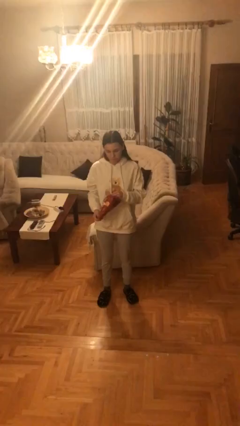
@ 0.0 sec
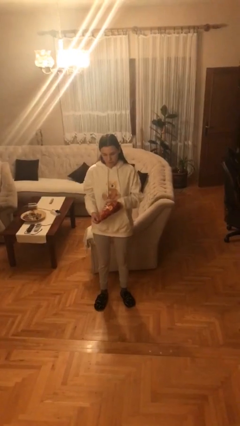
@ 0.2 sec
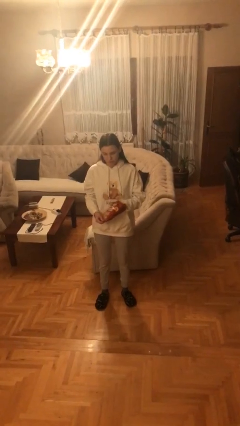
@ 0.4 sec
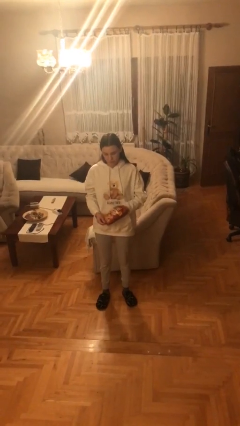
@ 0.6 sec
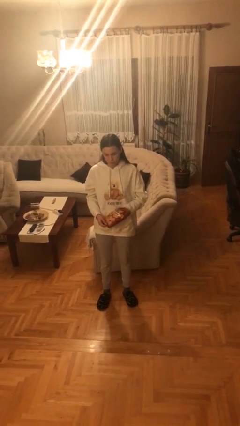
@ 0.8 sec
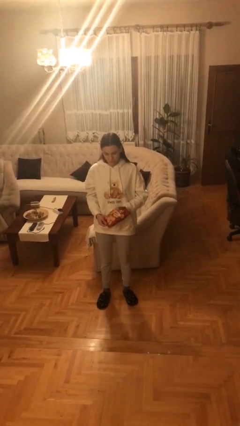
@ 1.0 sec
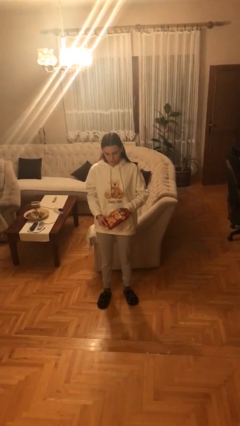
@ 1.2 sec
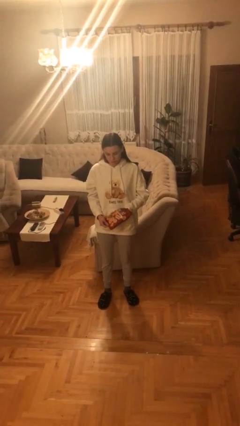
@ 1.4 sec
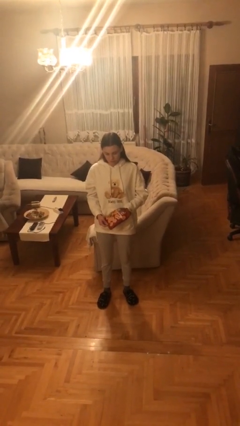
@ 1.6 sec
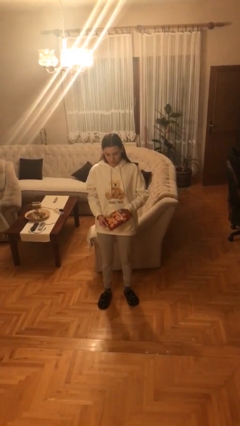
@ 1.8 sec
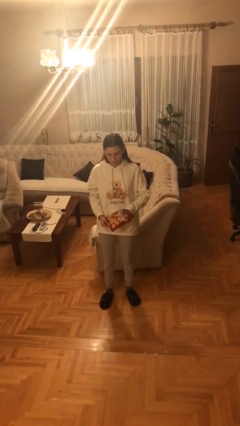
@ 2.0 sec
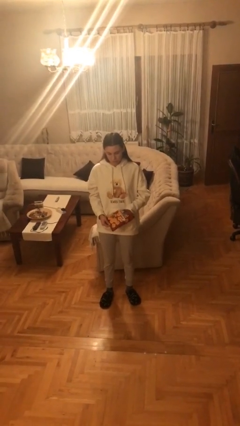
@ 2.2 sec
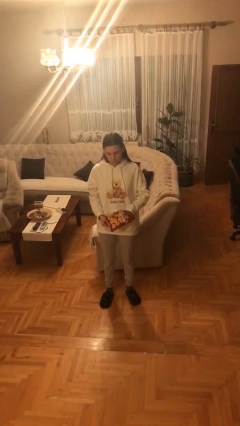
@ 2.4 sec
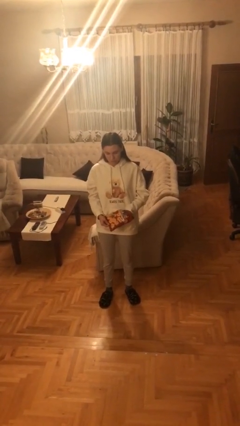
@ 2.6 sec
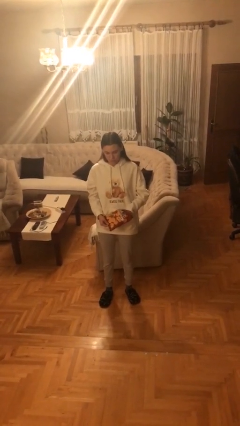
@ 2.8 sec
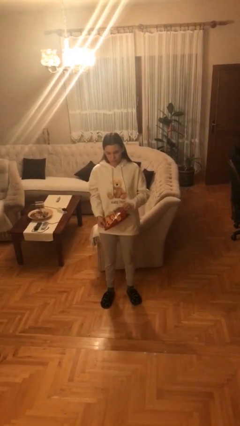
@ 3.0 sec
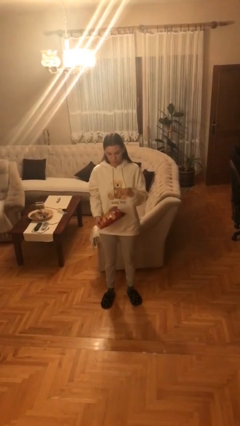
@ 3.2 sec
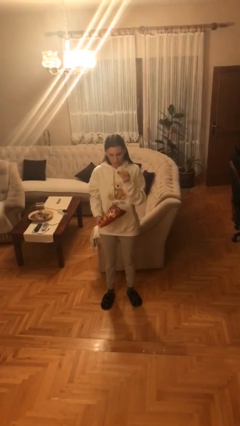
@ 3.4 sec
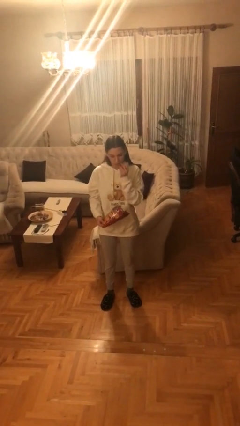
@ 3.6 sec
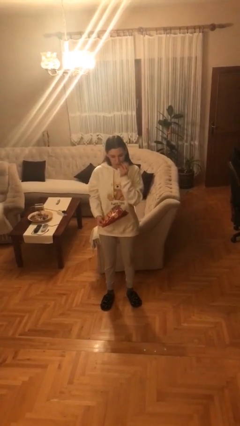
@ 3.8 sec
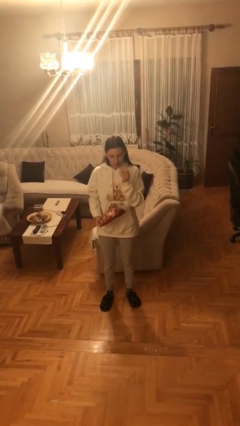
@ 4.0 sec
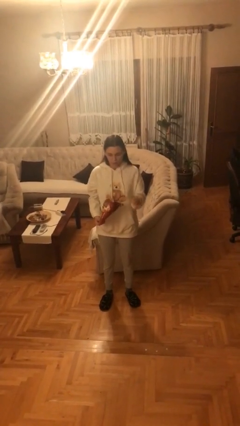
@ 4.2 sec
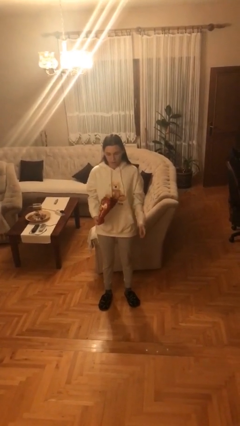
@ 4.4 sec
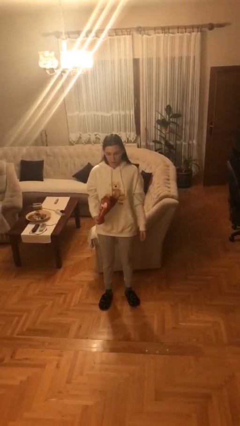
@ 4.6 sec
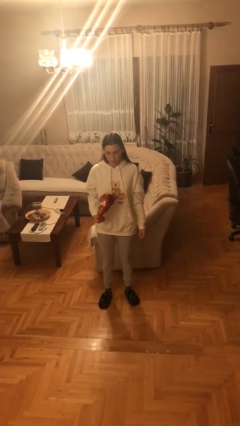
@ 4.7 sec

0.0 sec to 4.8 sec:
person eats snack from bag

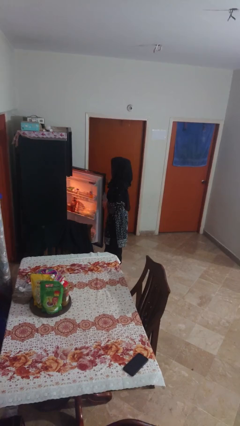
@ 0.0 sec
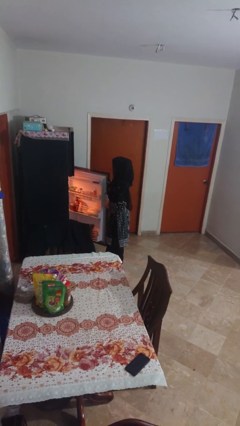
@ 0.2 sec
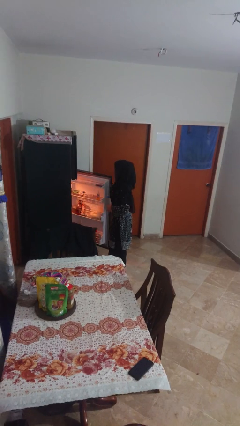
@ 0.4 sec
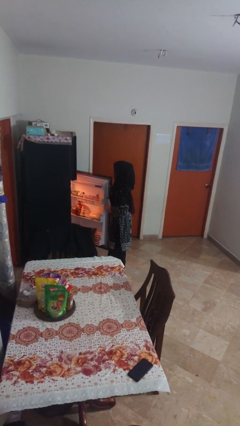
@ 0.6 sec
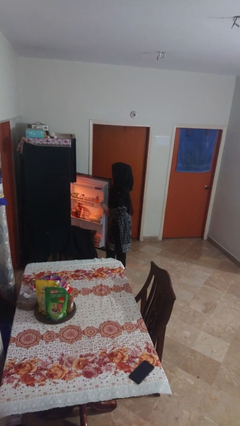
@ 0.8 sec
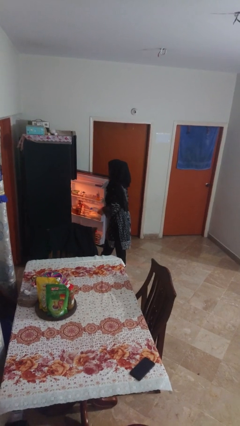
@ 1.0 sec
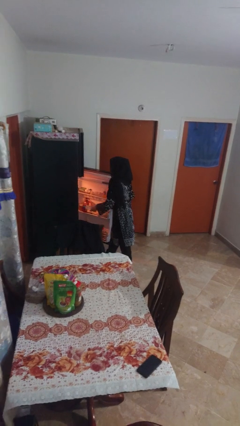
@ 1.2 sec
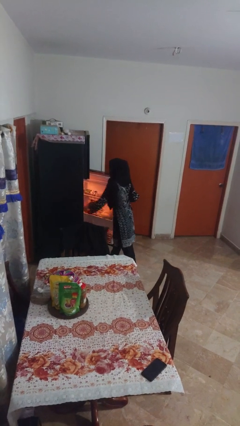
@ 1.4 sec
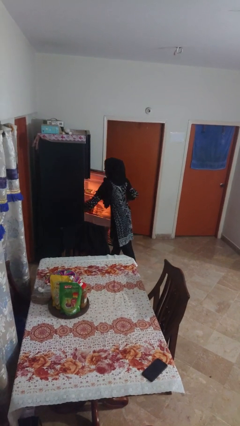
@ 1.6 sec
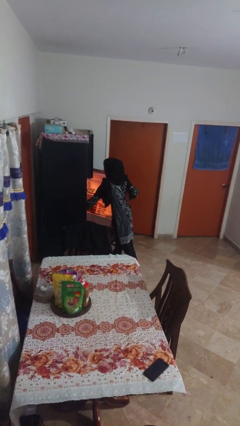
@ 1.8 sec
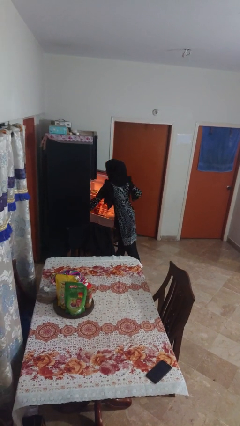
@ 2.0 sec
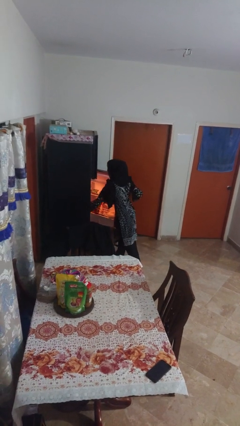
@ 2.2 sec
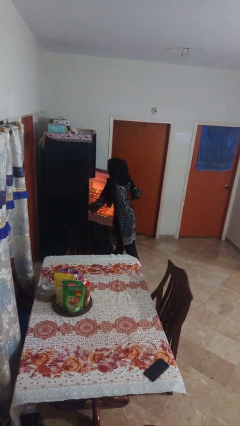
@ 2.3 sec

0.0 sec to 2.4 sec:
person puts object into refrigerator

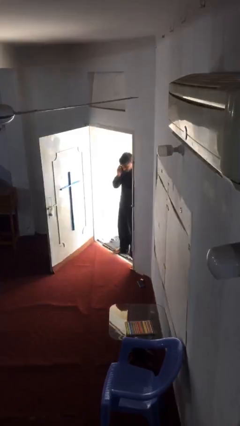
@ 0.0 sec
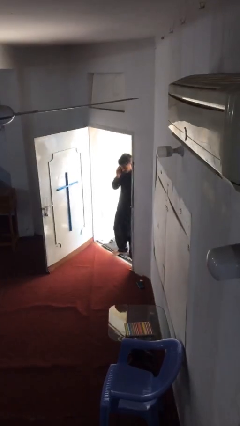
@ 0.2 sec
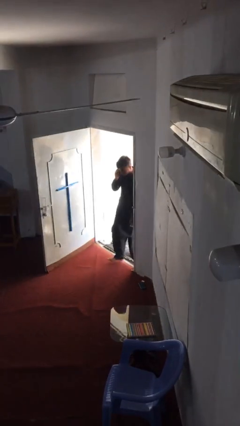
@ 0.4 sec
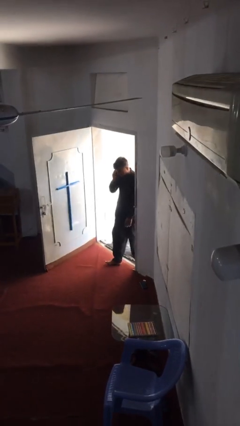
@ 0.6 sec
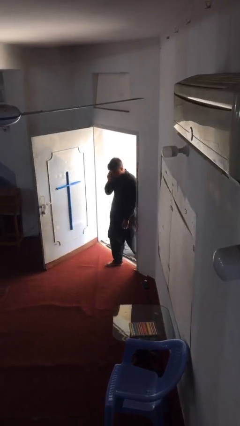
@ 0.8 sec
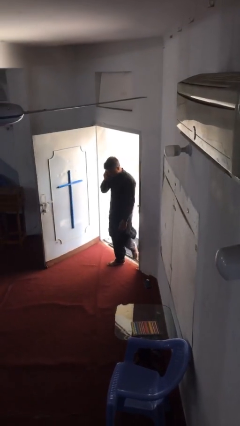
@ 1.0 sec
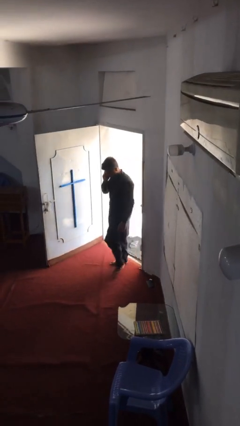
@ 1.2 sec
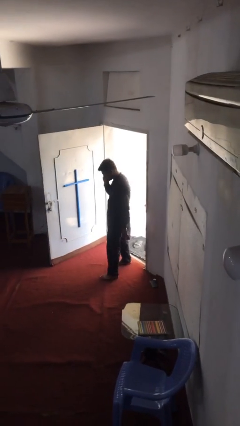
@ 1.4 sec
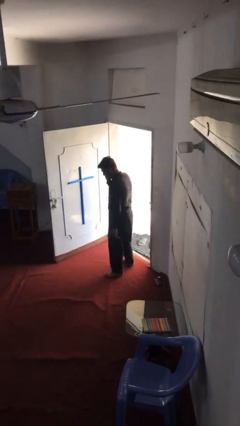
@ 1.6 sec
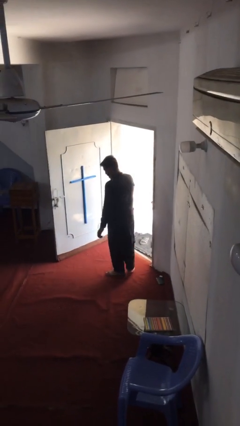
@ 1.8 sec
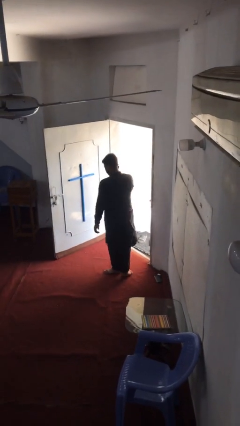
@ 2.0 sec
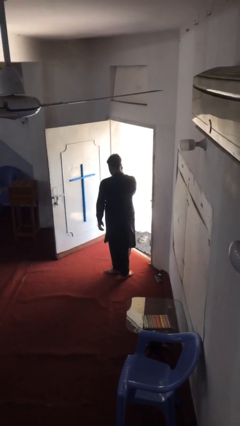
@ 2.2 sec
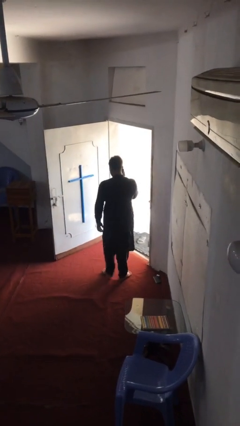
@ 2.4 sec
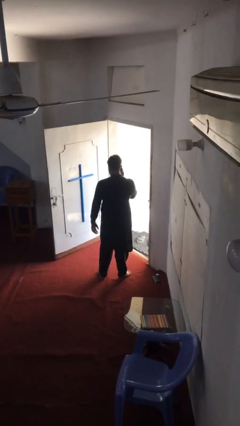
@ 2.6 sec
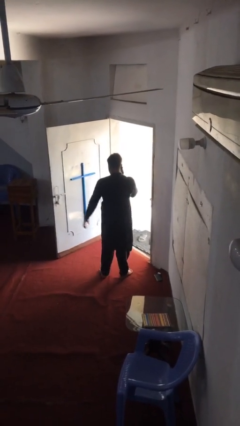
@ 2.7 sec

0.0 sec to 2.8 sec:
person enters scene through structure

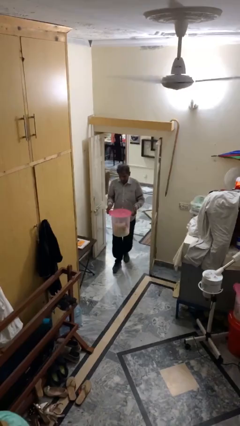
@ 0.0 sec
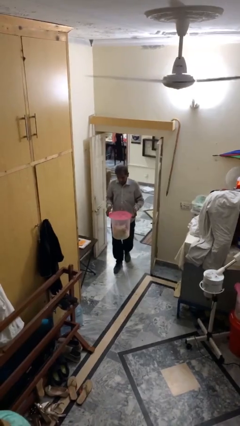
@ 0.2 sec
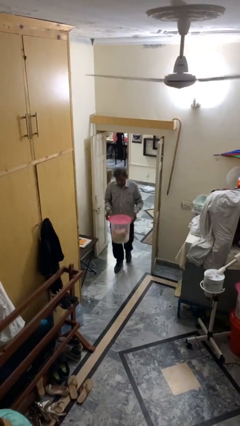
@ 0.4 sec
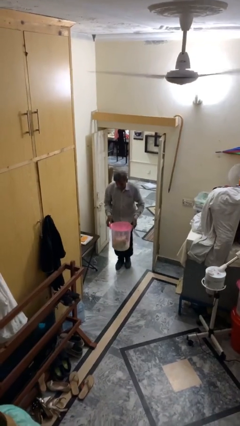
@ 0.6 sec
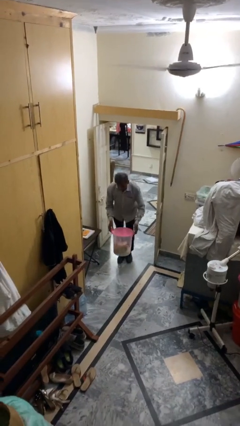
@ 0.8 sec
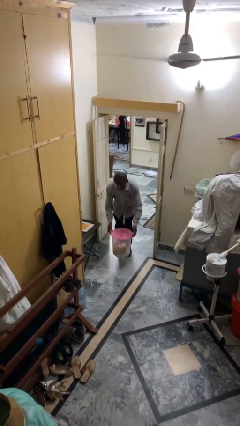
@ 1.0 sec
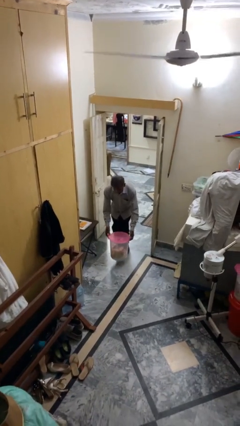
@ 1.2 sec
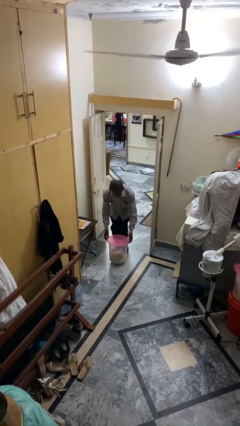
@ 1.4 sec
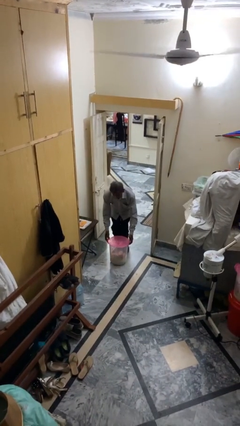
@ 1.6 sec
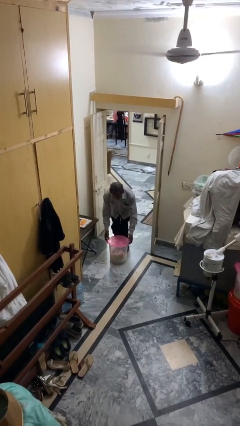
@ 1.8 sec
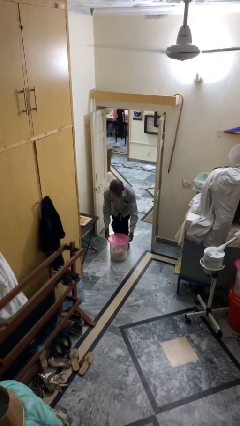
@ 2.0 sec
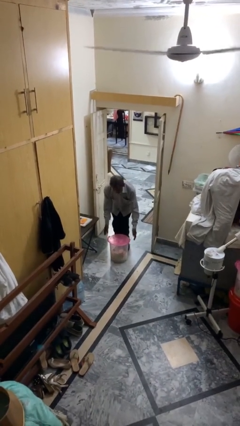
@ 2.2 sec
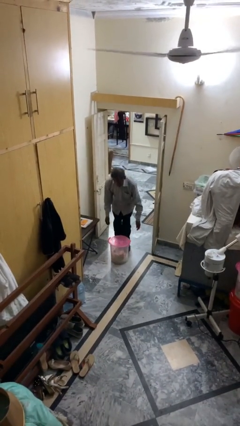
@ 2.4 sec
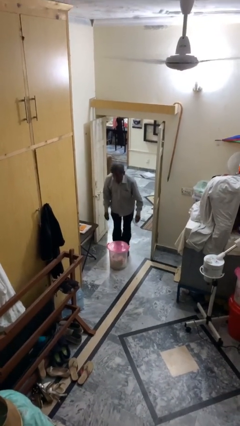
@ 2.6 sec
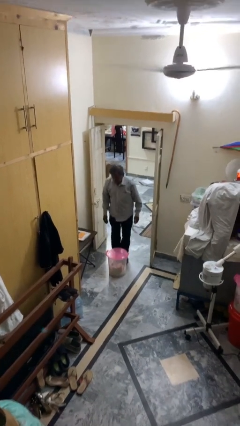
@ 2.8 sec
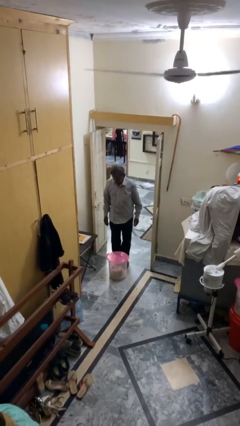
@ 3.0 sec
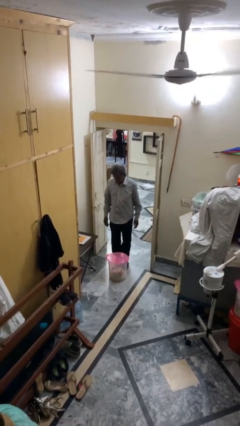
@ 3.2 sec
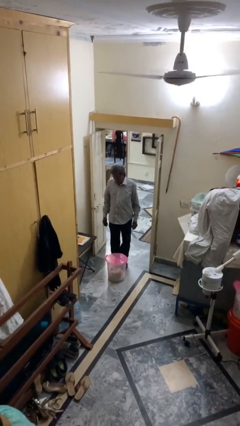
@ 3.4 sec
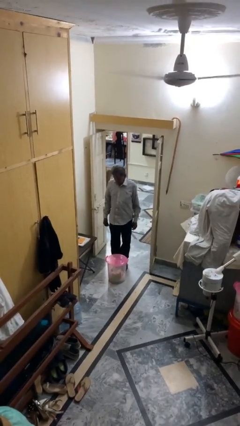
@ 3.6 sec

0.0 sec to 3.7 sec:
person puts down object on floor

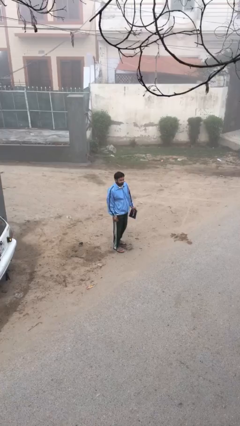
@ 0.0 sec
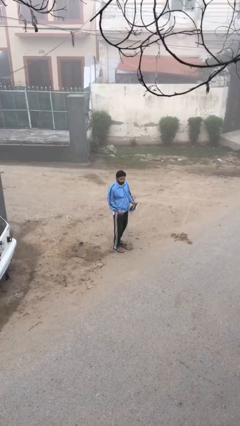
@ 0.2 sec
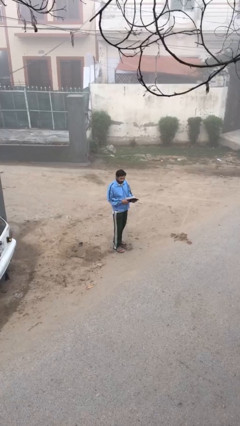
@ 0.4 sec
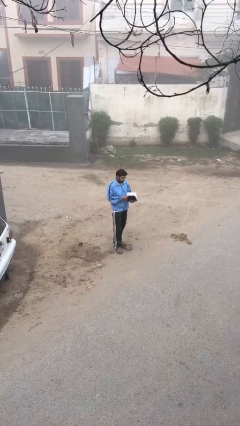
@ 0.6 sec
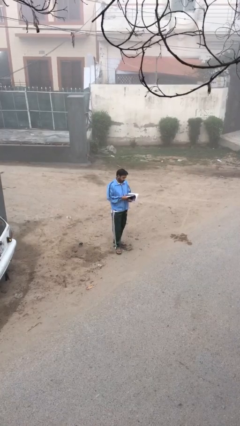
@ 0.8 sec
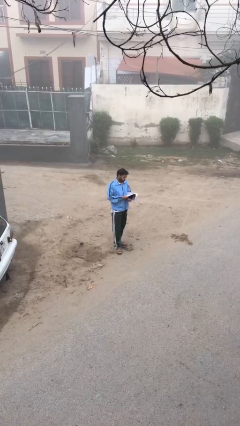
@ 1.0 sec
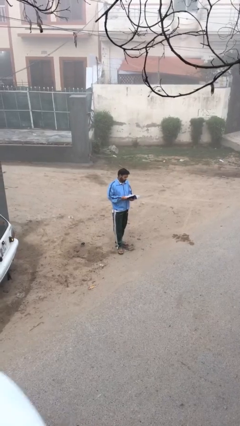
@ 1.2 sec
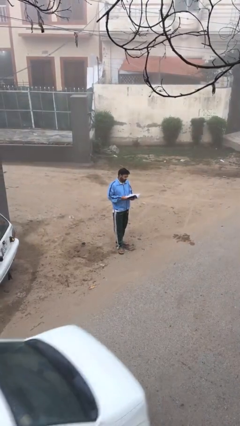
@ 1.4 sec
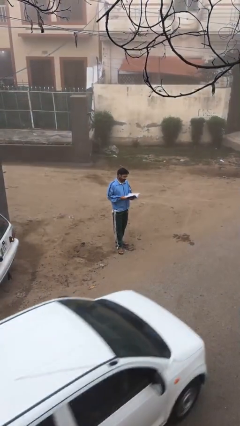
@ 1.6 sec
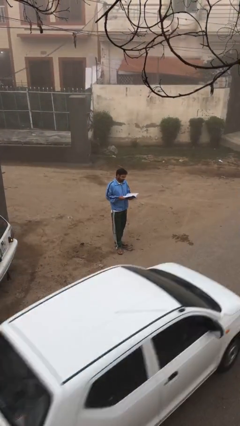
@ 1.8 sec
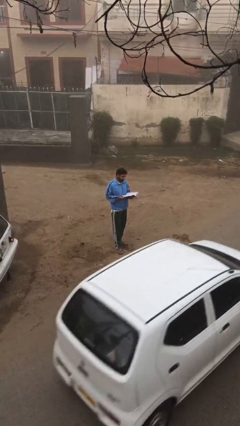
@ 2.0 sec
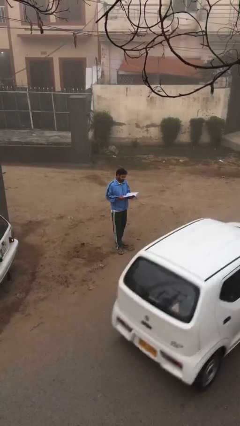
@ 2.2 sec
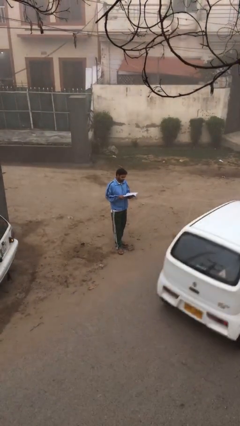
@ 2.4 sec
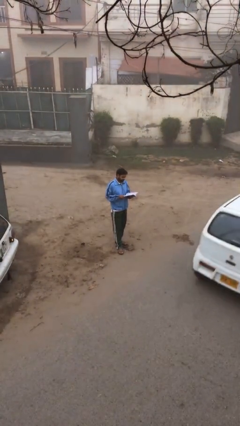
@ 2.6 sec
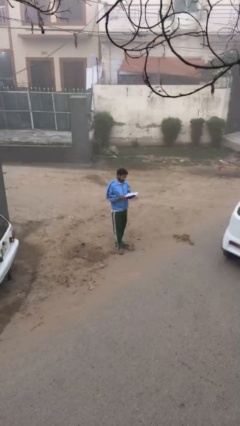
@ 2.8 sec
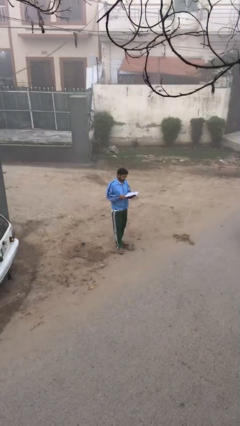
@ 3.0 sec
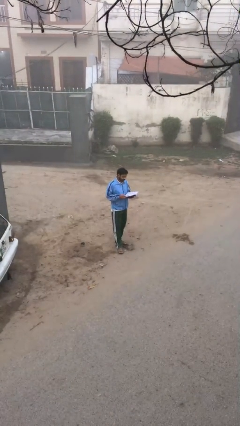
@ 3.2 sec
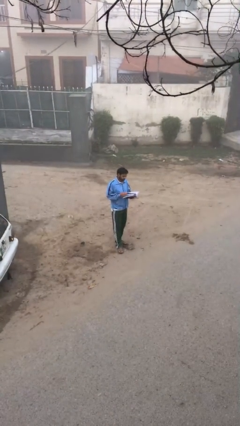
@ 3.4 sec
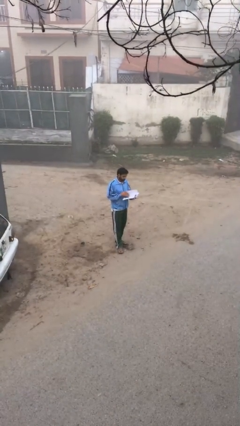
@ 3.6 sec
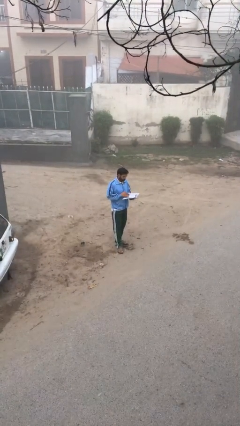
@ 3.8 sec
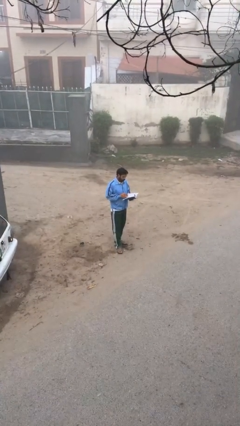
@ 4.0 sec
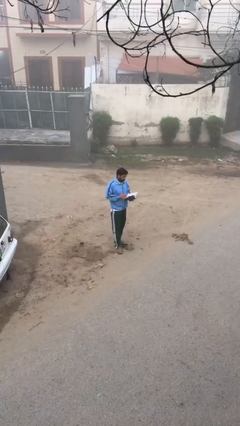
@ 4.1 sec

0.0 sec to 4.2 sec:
person reads document
